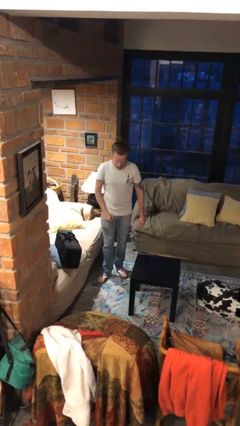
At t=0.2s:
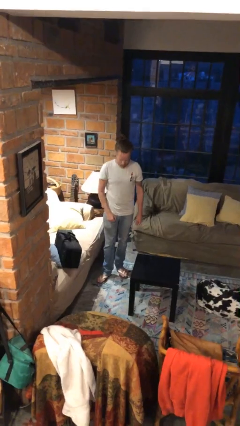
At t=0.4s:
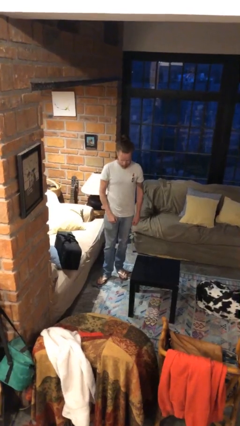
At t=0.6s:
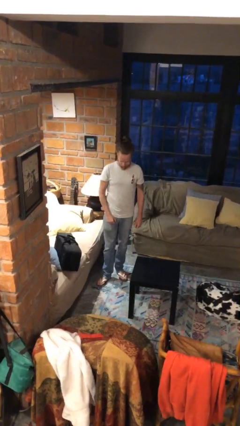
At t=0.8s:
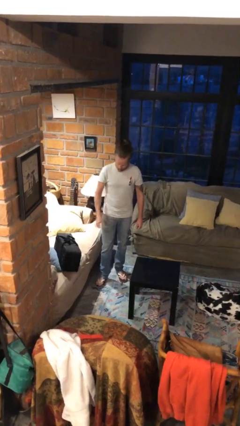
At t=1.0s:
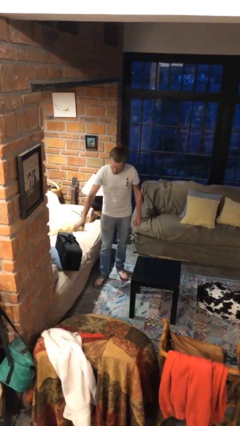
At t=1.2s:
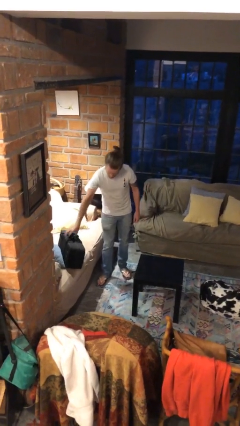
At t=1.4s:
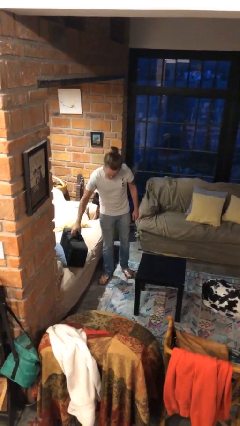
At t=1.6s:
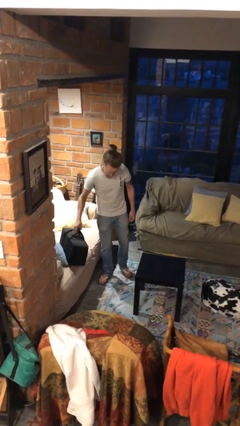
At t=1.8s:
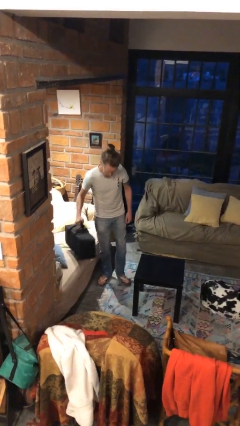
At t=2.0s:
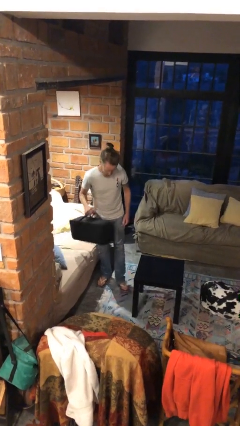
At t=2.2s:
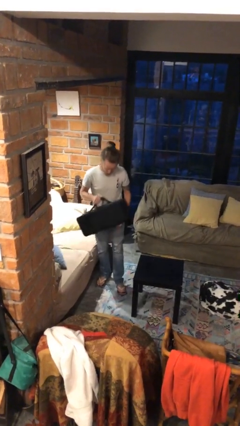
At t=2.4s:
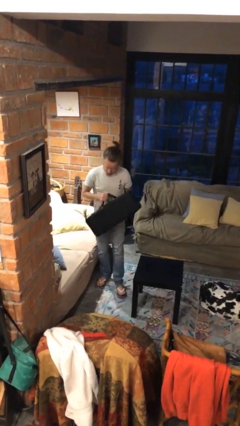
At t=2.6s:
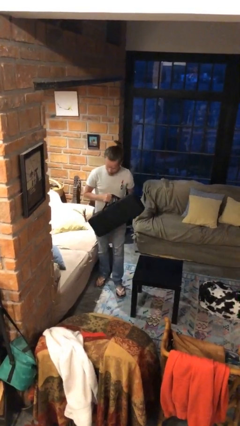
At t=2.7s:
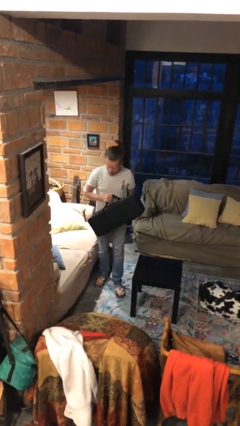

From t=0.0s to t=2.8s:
person picks up object from couch

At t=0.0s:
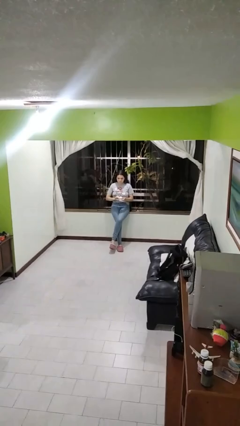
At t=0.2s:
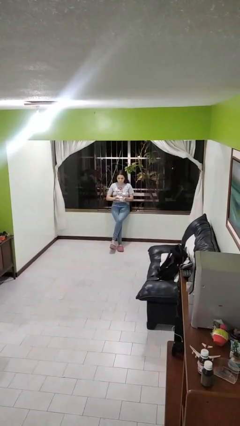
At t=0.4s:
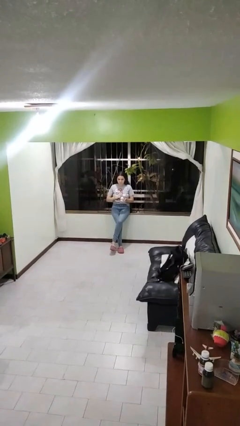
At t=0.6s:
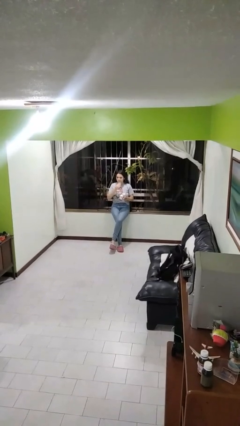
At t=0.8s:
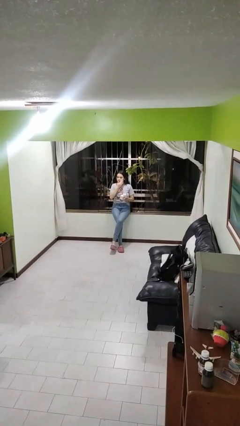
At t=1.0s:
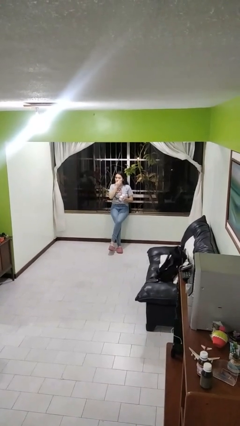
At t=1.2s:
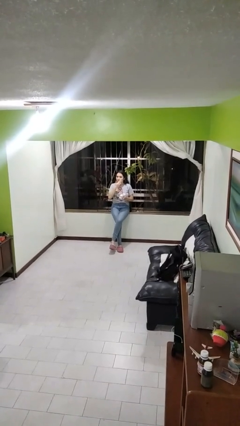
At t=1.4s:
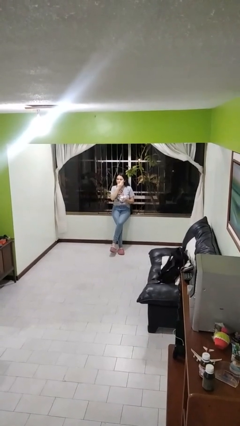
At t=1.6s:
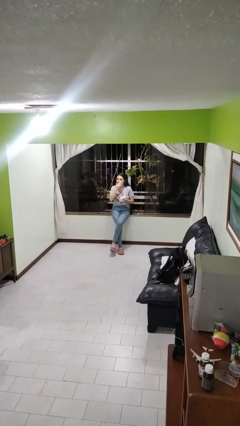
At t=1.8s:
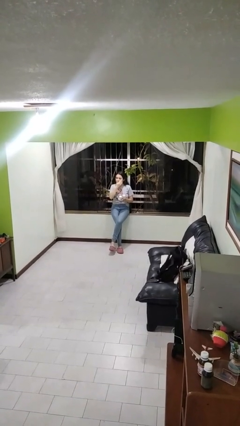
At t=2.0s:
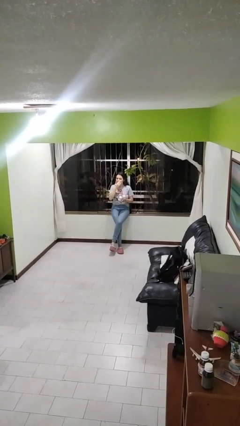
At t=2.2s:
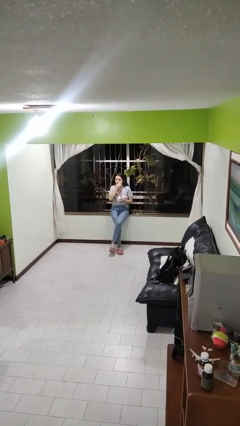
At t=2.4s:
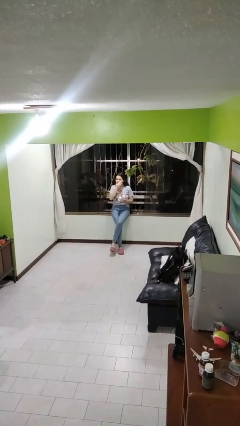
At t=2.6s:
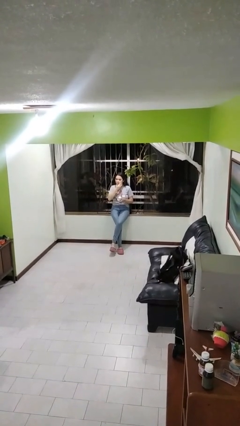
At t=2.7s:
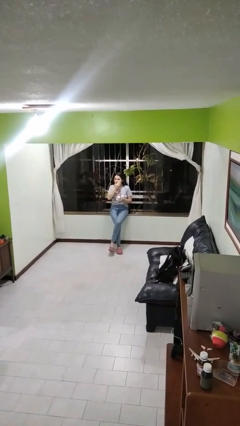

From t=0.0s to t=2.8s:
person applies facial moisturizer

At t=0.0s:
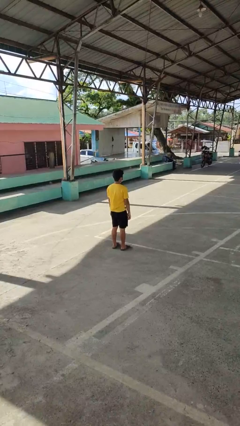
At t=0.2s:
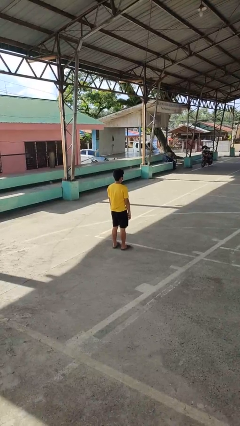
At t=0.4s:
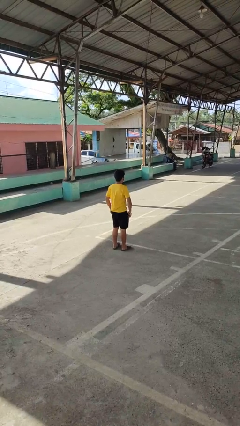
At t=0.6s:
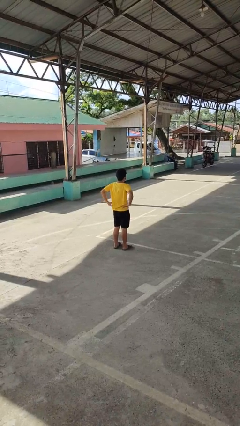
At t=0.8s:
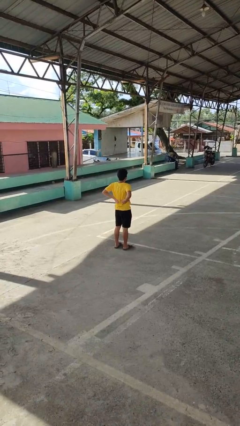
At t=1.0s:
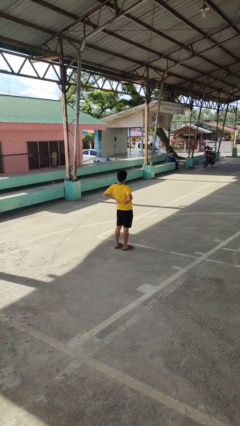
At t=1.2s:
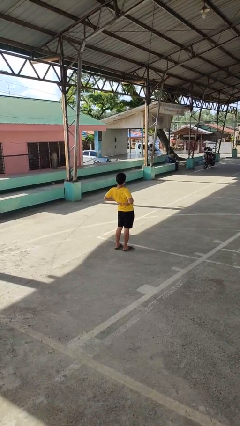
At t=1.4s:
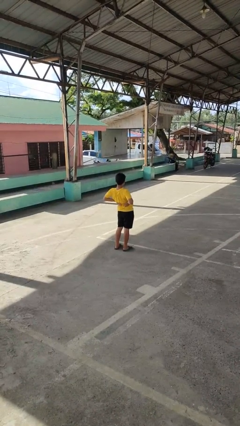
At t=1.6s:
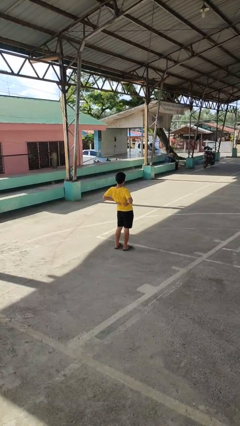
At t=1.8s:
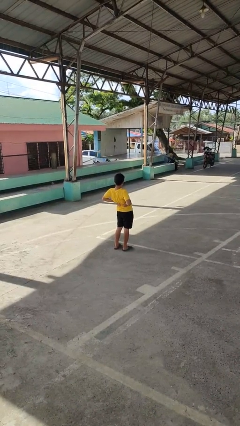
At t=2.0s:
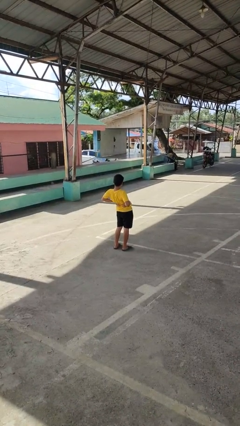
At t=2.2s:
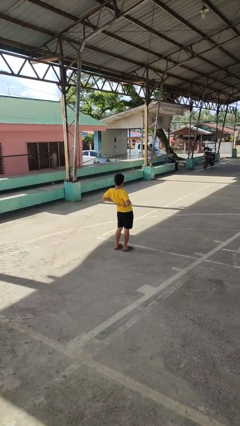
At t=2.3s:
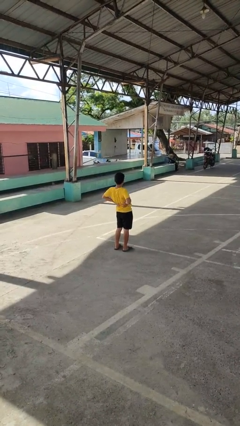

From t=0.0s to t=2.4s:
person stretches back

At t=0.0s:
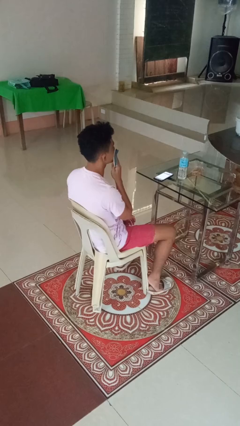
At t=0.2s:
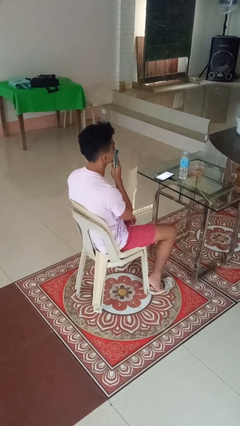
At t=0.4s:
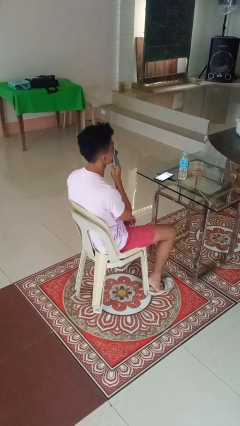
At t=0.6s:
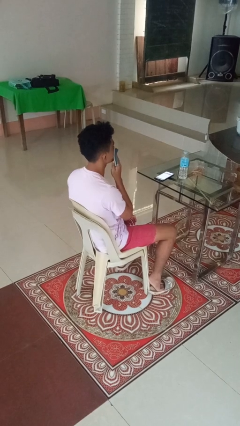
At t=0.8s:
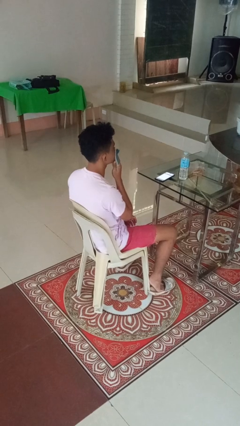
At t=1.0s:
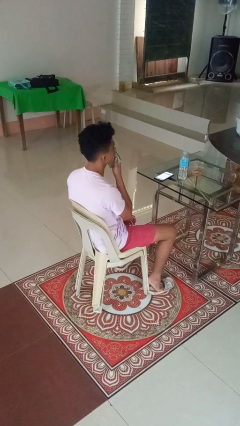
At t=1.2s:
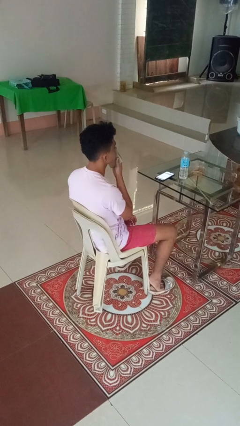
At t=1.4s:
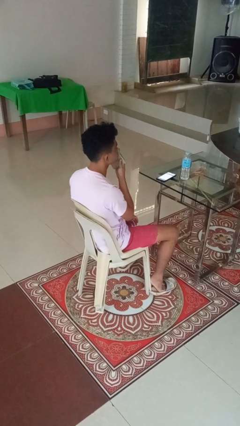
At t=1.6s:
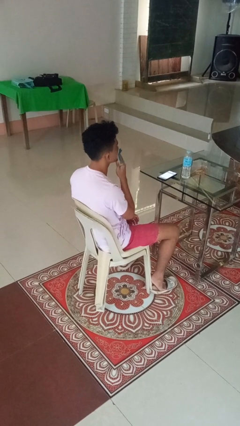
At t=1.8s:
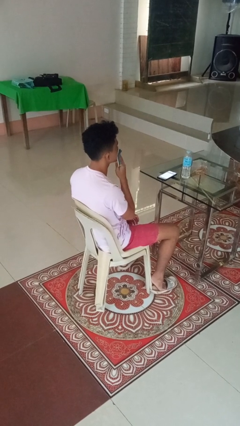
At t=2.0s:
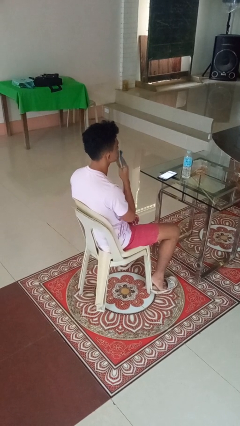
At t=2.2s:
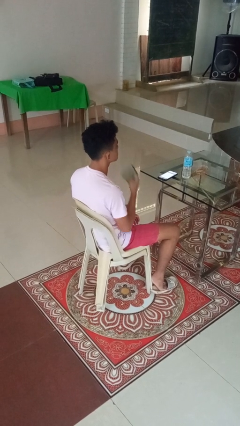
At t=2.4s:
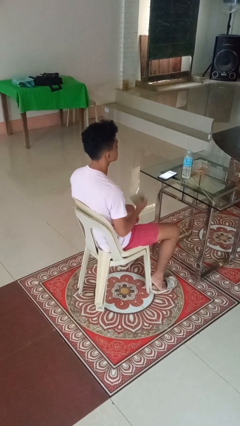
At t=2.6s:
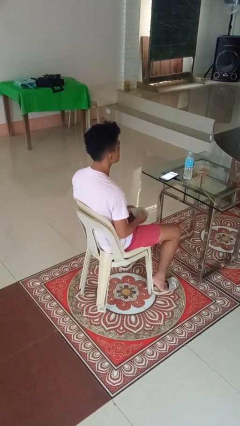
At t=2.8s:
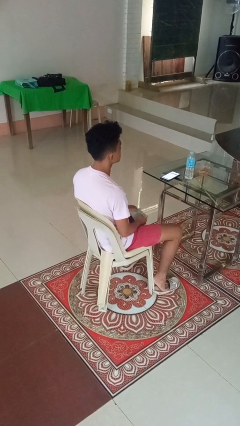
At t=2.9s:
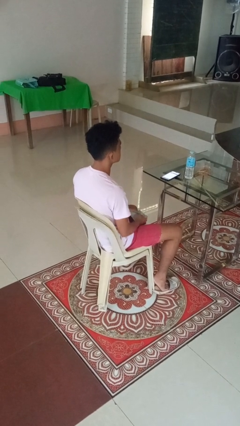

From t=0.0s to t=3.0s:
person wipes mouth with napkin

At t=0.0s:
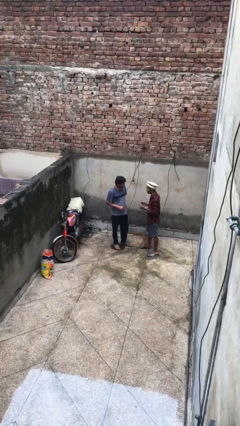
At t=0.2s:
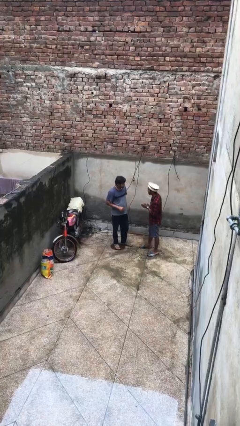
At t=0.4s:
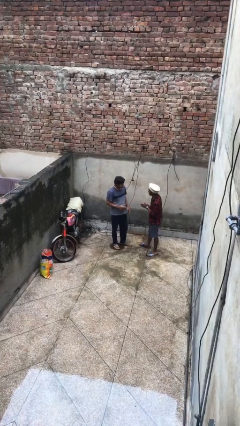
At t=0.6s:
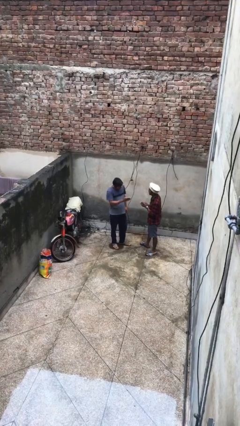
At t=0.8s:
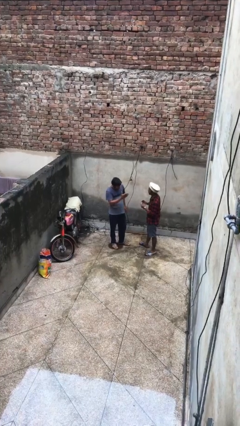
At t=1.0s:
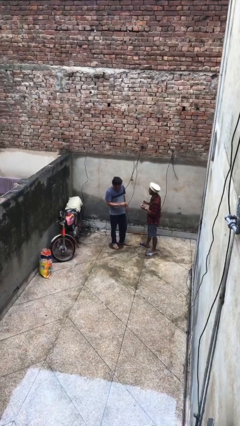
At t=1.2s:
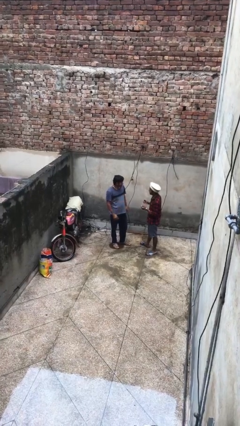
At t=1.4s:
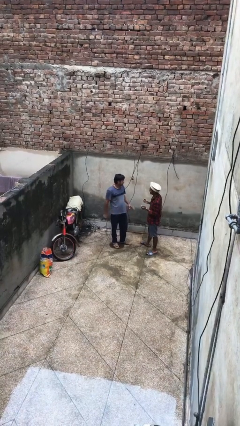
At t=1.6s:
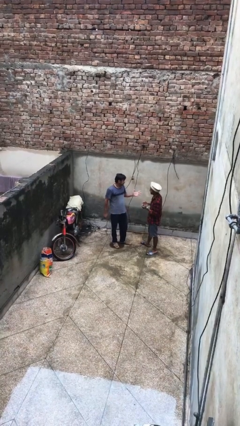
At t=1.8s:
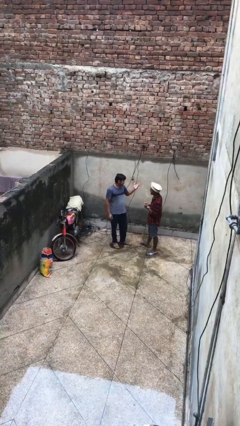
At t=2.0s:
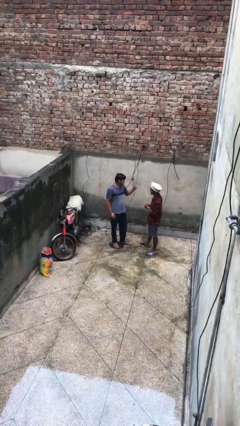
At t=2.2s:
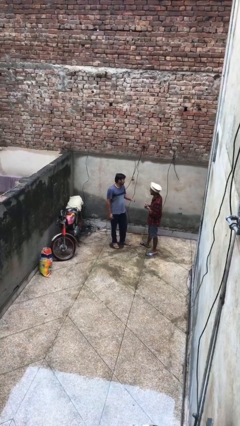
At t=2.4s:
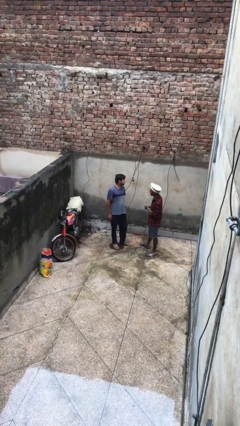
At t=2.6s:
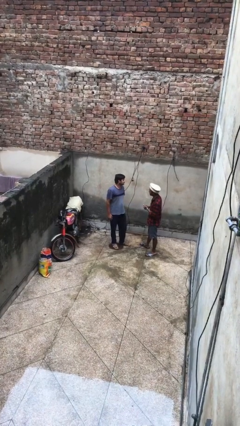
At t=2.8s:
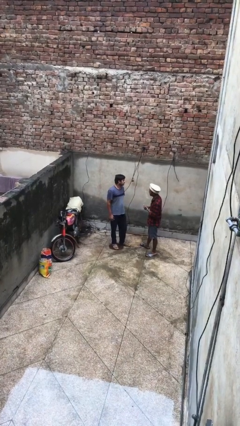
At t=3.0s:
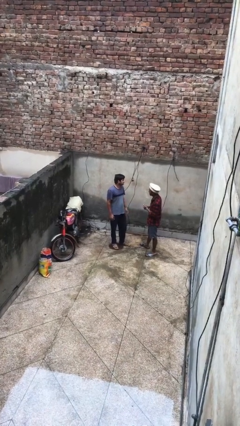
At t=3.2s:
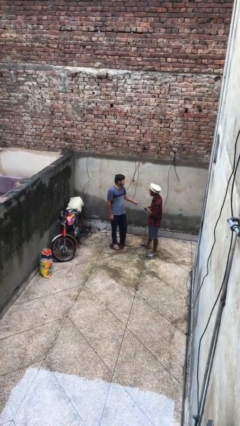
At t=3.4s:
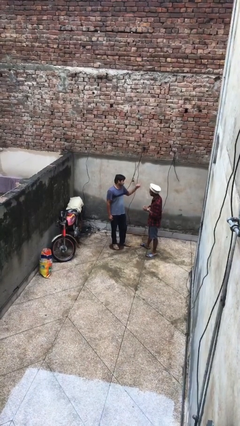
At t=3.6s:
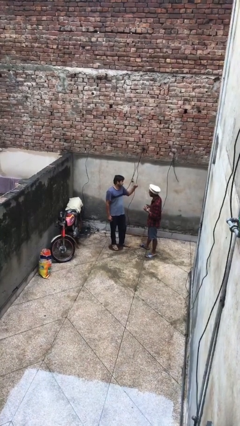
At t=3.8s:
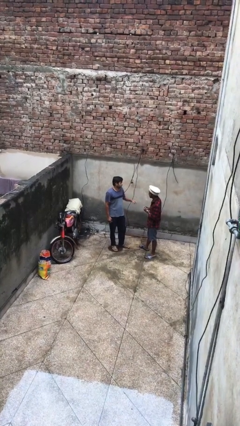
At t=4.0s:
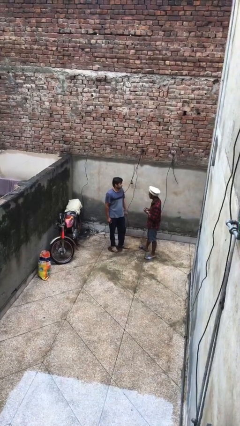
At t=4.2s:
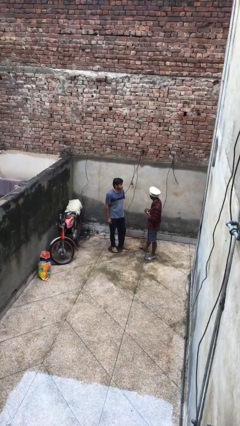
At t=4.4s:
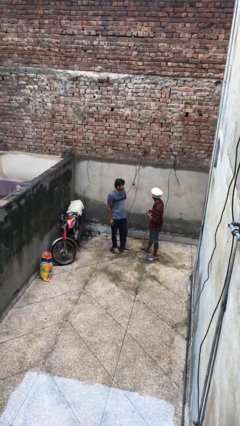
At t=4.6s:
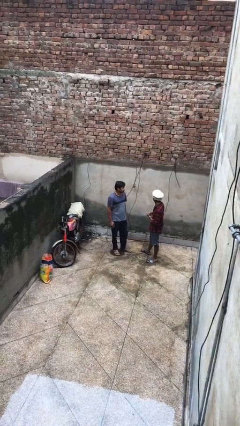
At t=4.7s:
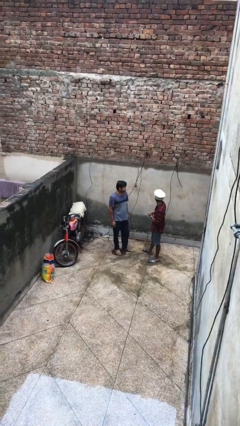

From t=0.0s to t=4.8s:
person talks to person

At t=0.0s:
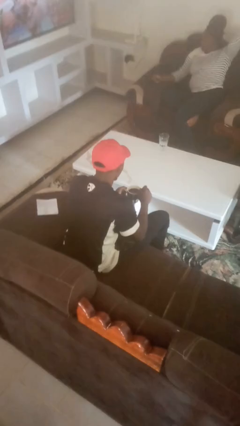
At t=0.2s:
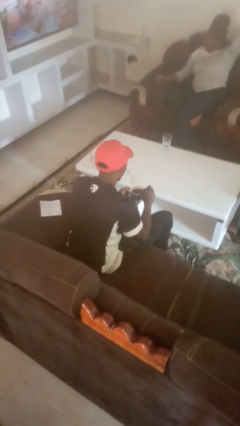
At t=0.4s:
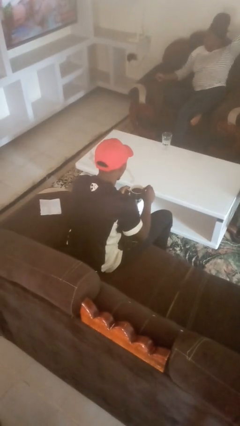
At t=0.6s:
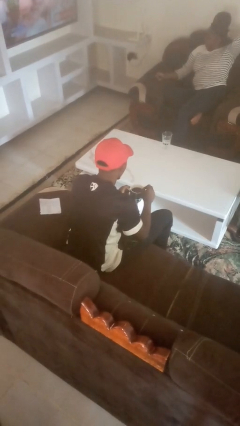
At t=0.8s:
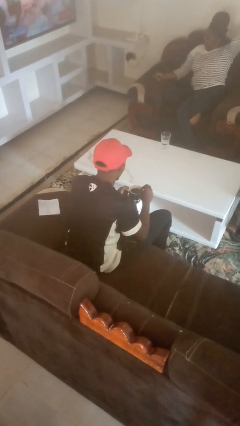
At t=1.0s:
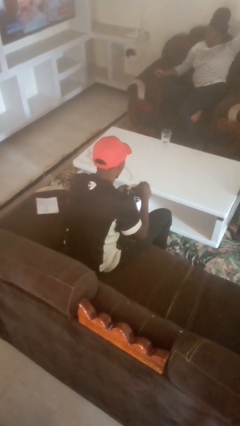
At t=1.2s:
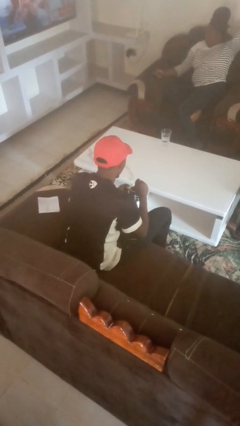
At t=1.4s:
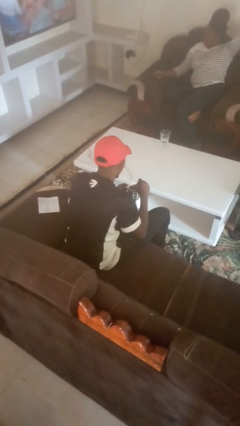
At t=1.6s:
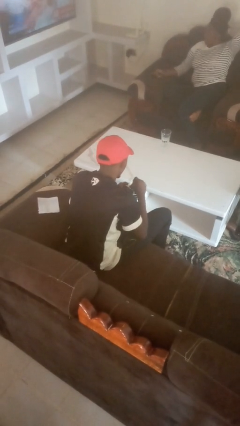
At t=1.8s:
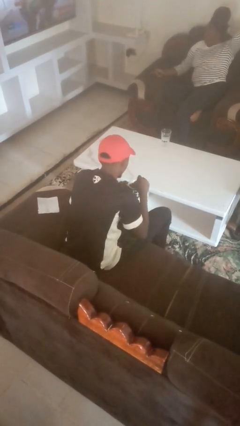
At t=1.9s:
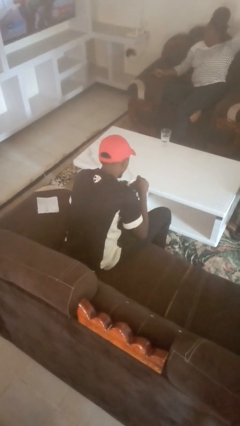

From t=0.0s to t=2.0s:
person stirs mug
